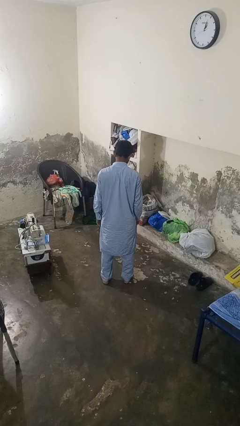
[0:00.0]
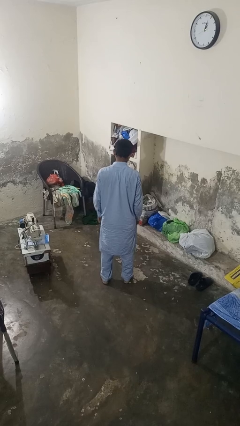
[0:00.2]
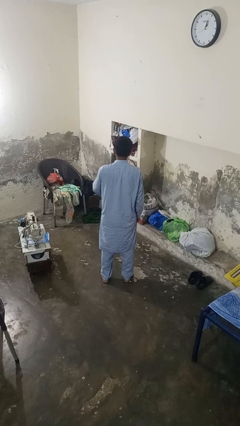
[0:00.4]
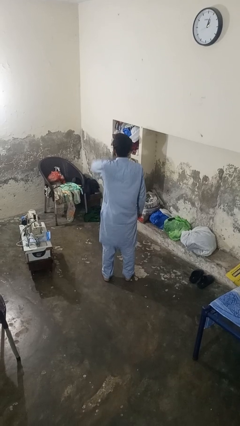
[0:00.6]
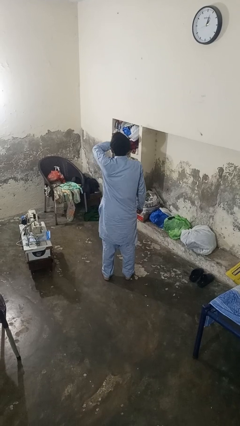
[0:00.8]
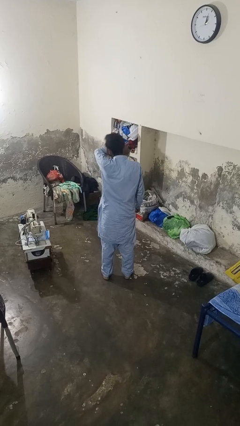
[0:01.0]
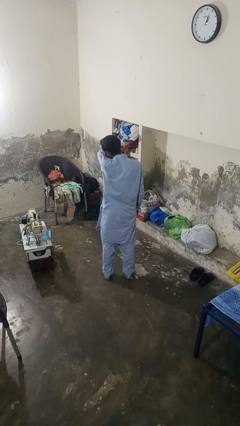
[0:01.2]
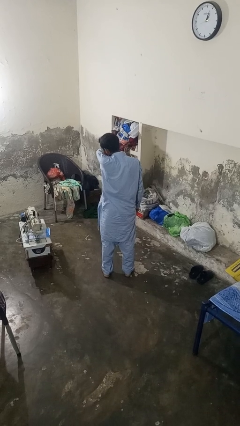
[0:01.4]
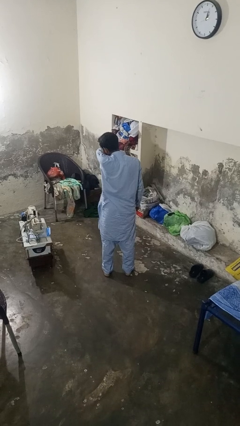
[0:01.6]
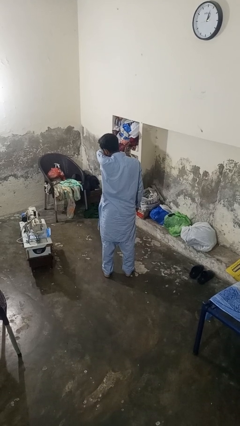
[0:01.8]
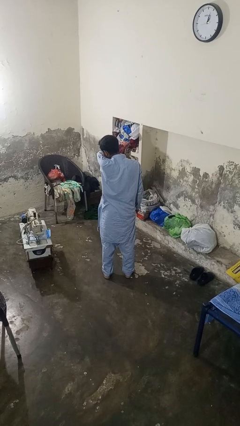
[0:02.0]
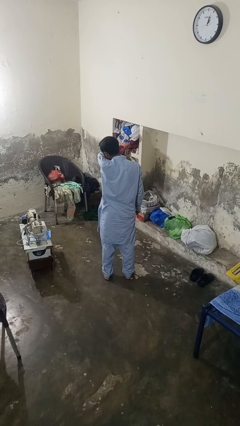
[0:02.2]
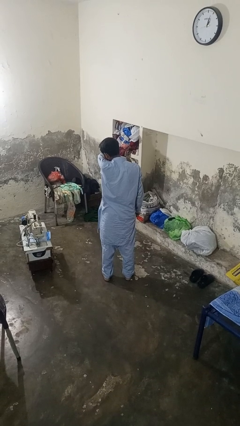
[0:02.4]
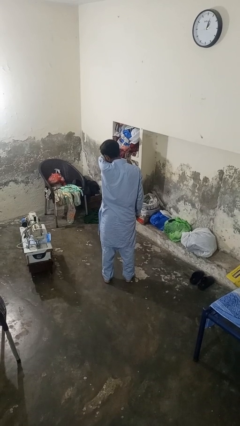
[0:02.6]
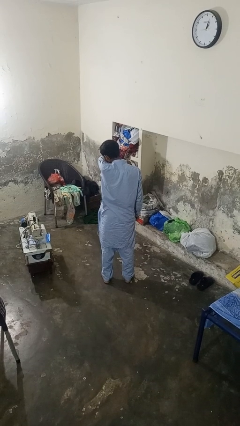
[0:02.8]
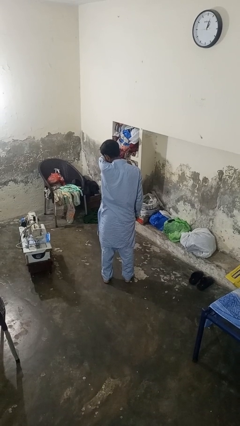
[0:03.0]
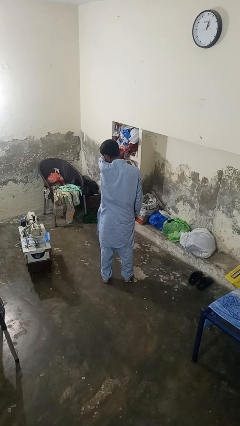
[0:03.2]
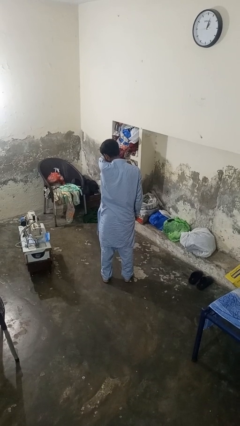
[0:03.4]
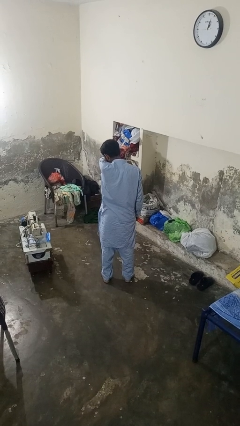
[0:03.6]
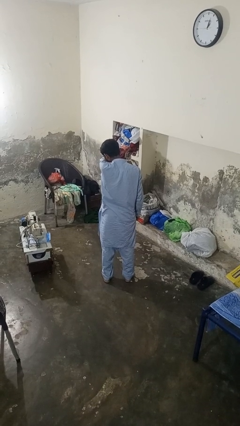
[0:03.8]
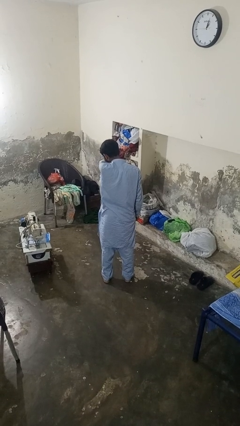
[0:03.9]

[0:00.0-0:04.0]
person sneezes into arm

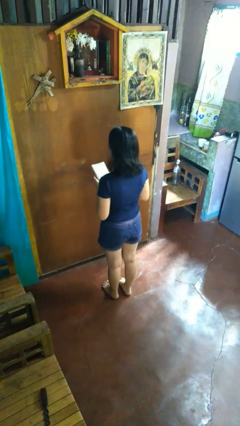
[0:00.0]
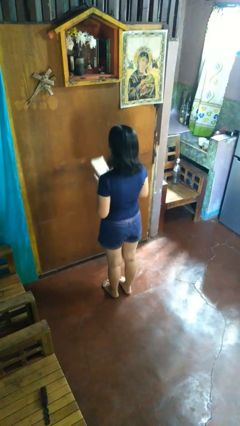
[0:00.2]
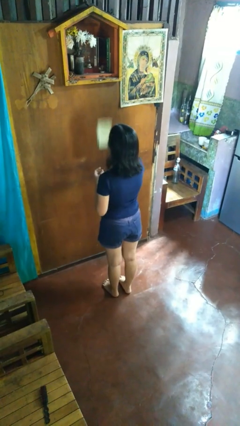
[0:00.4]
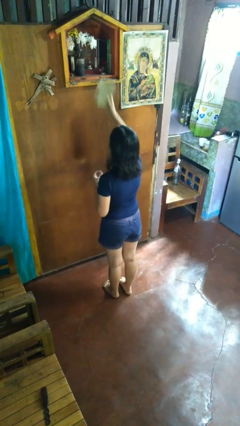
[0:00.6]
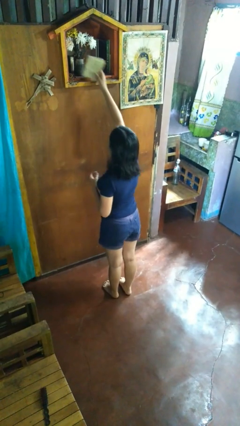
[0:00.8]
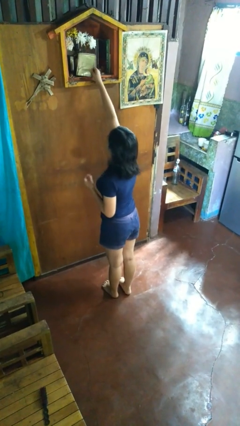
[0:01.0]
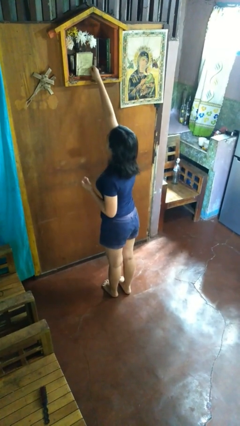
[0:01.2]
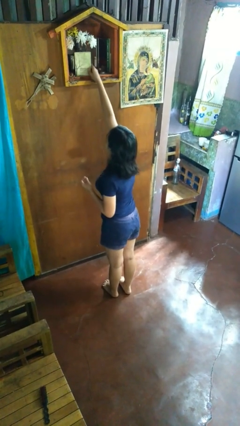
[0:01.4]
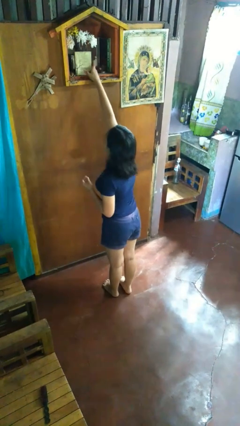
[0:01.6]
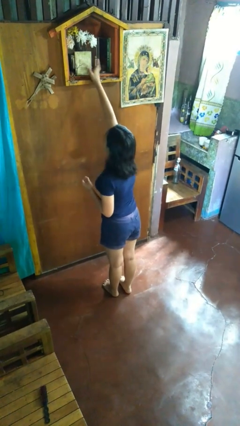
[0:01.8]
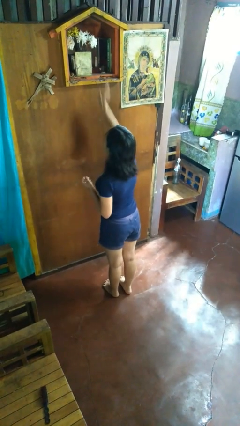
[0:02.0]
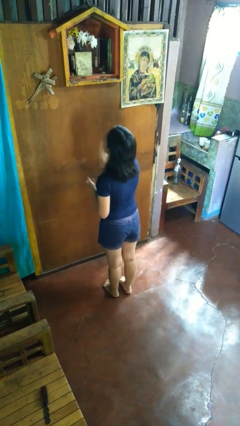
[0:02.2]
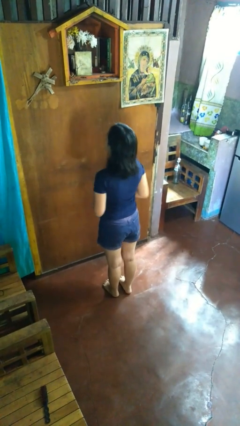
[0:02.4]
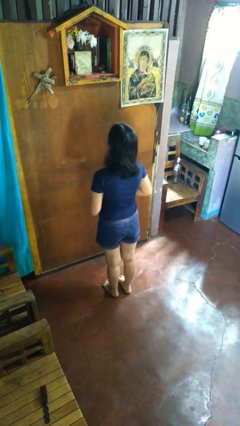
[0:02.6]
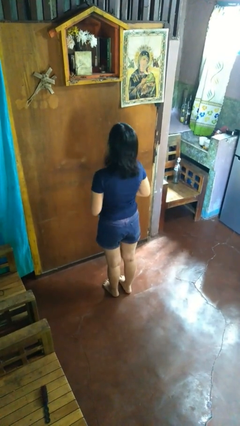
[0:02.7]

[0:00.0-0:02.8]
person puts down object on shelf

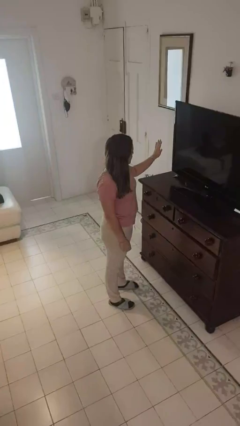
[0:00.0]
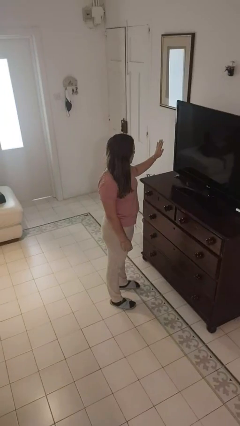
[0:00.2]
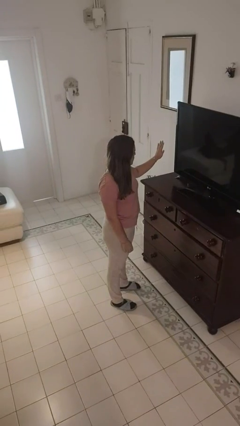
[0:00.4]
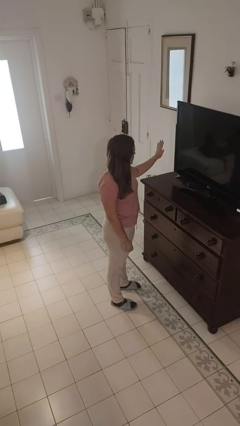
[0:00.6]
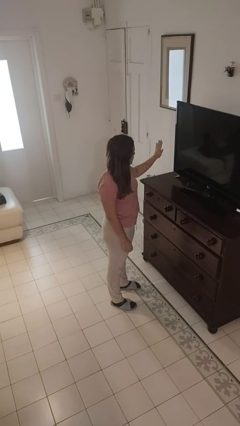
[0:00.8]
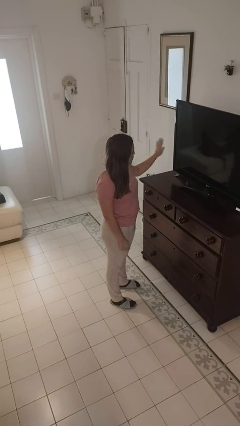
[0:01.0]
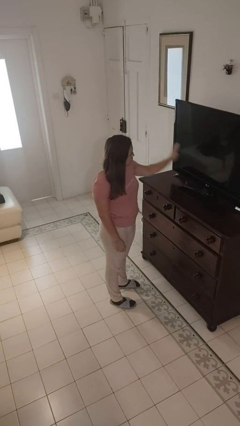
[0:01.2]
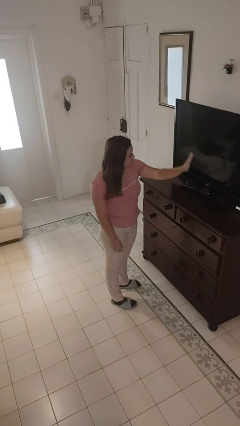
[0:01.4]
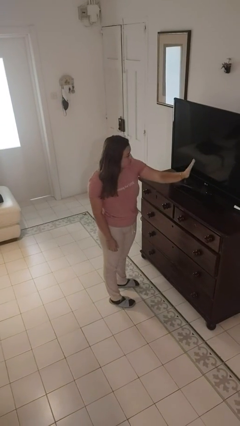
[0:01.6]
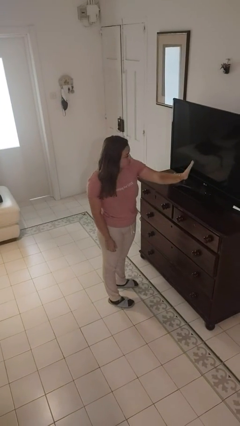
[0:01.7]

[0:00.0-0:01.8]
person gestures swipe left

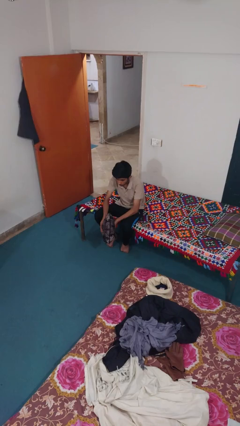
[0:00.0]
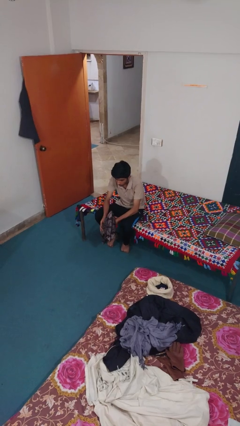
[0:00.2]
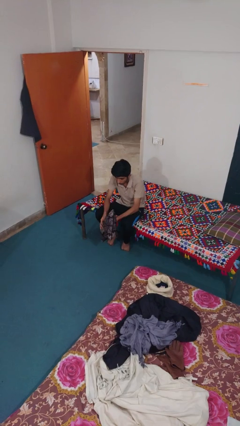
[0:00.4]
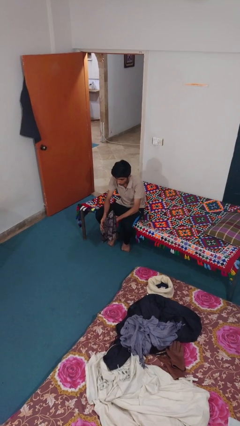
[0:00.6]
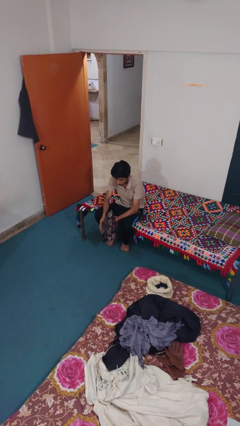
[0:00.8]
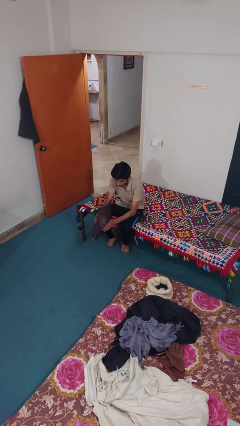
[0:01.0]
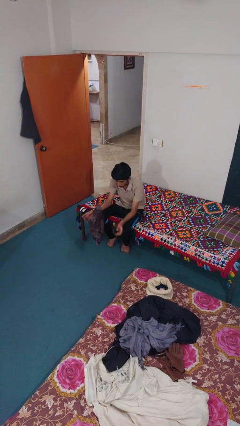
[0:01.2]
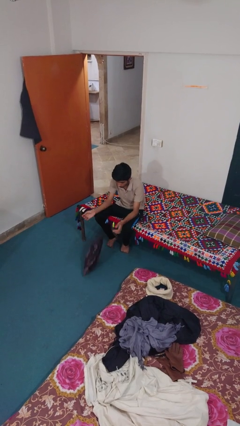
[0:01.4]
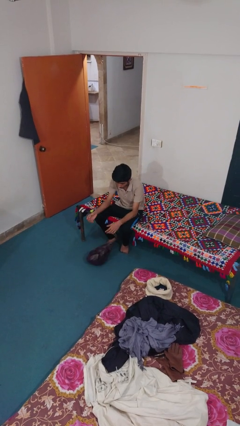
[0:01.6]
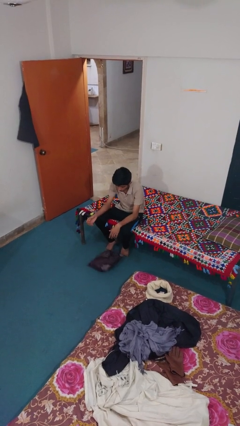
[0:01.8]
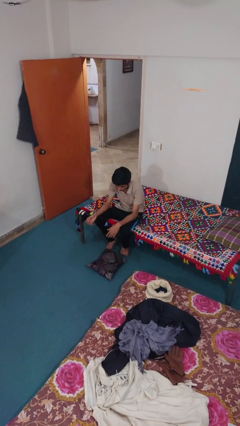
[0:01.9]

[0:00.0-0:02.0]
person drops object

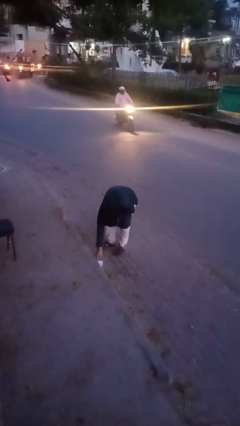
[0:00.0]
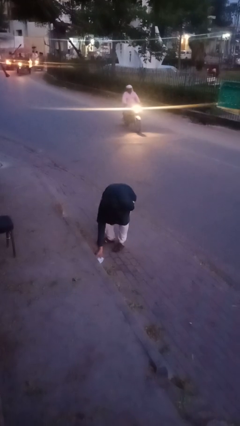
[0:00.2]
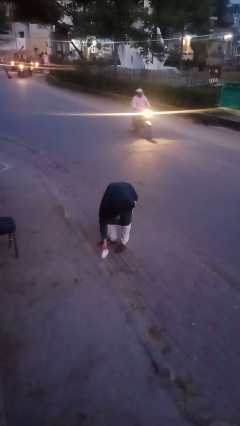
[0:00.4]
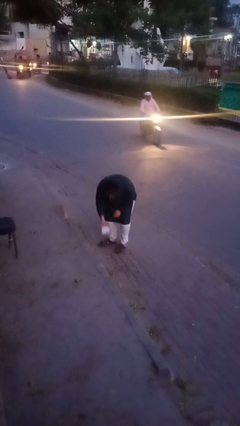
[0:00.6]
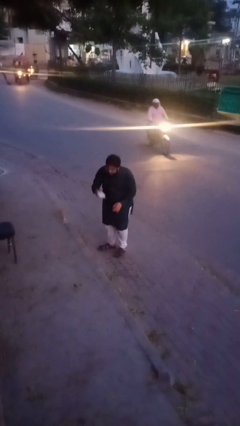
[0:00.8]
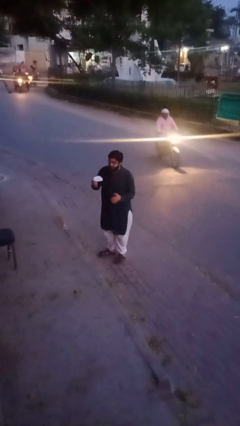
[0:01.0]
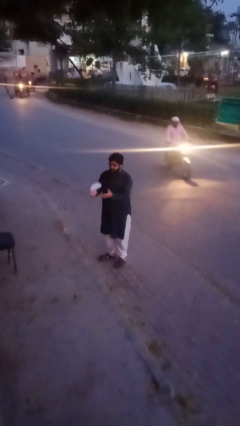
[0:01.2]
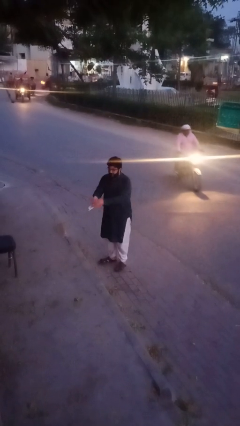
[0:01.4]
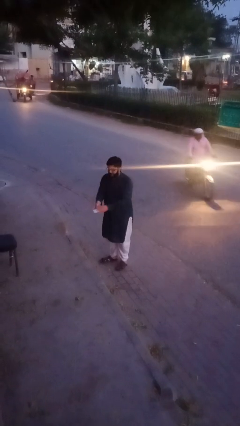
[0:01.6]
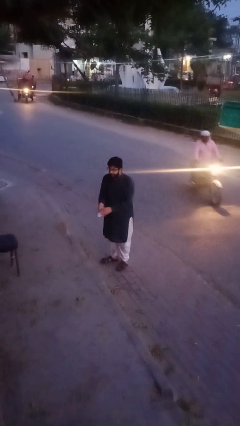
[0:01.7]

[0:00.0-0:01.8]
person picks up object from floor

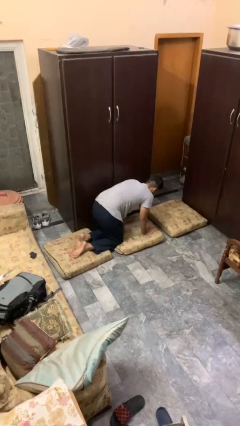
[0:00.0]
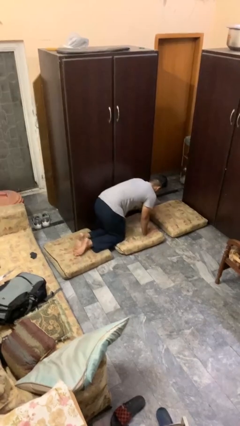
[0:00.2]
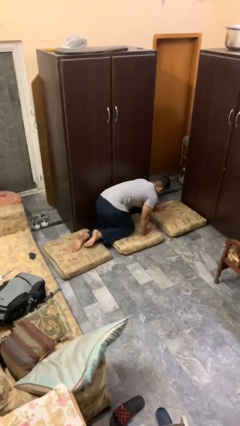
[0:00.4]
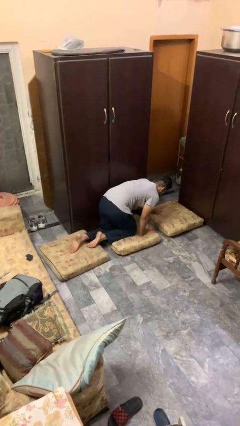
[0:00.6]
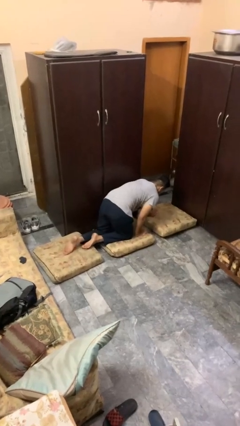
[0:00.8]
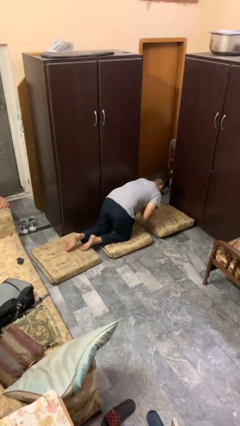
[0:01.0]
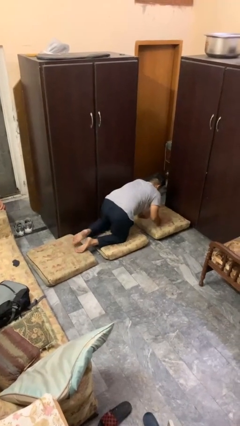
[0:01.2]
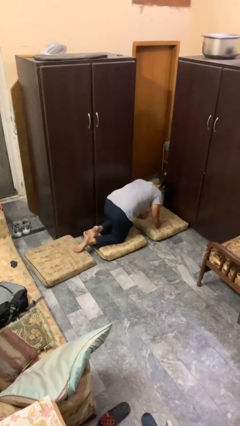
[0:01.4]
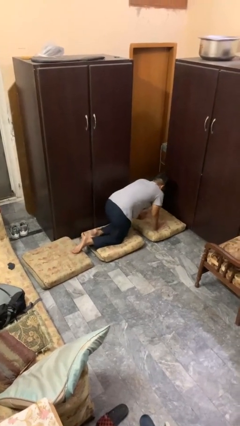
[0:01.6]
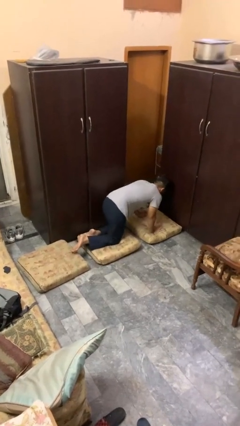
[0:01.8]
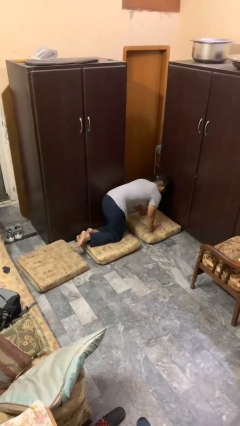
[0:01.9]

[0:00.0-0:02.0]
person crawls

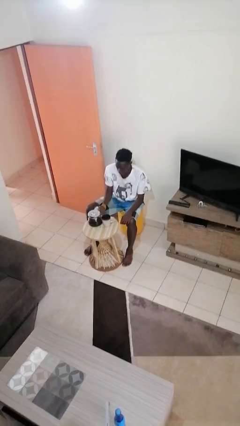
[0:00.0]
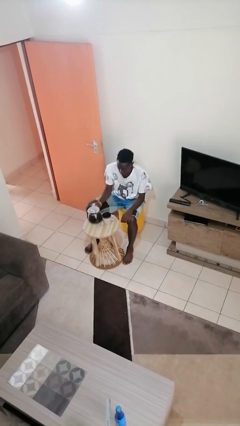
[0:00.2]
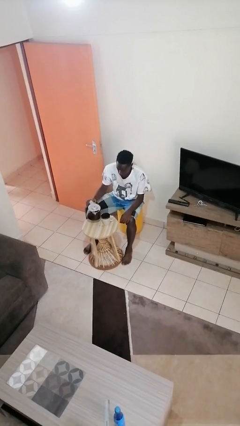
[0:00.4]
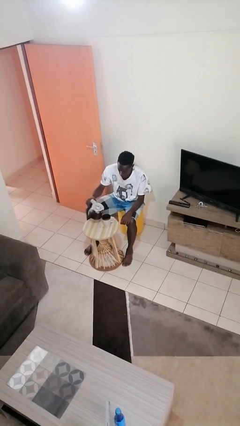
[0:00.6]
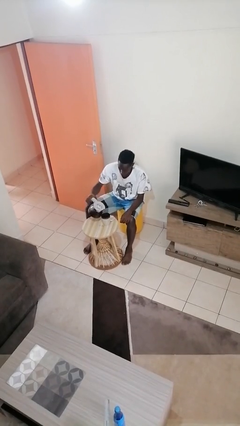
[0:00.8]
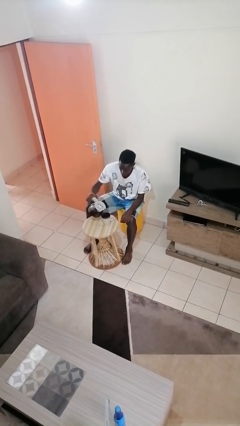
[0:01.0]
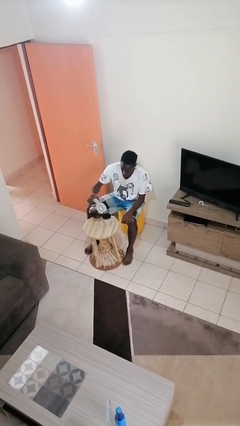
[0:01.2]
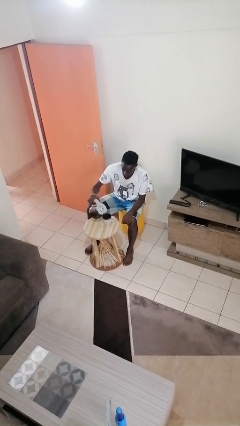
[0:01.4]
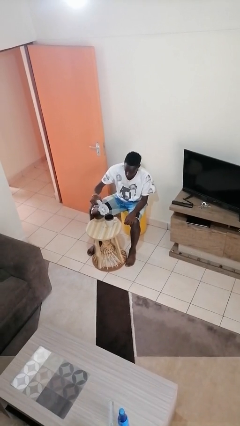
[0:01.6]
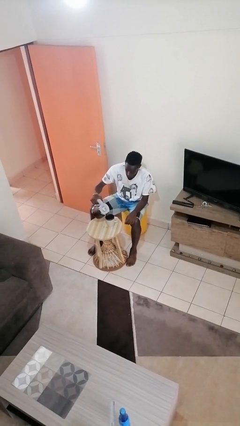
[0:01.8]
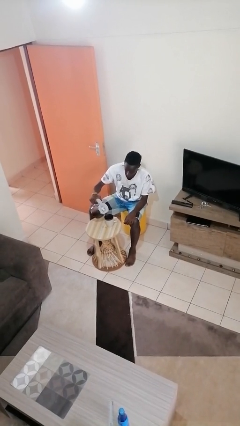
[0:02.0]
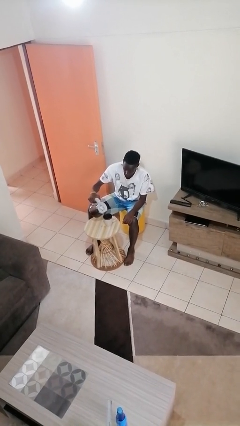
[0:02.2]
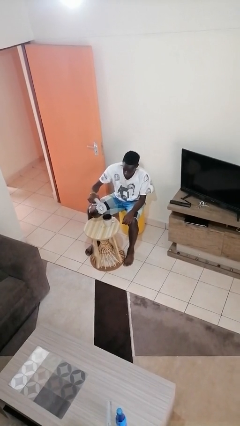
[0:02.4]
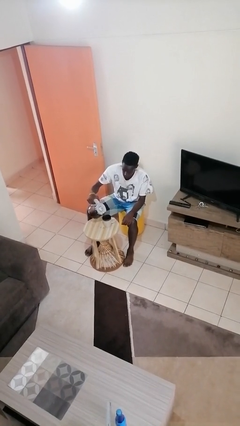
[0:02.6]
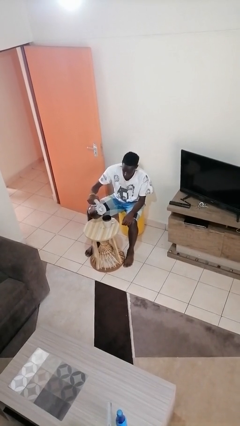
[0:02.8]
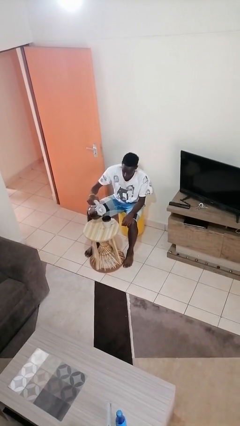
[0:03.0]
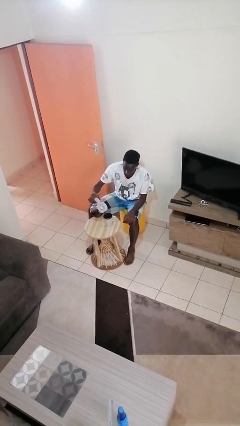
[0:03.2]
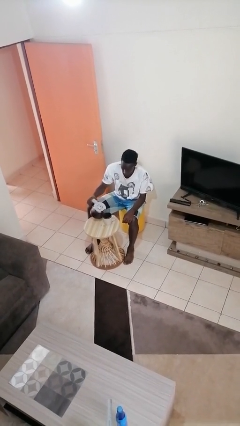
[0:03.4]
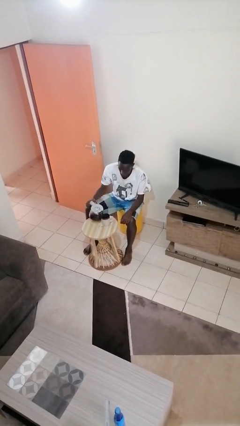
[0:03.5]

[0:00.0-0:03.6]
person pours coffee into mug
